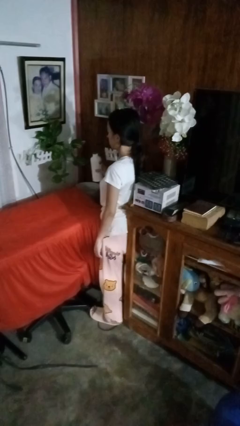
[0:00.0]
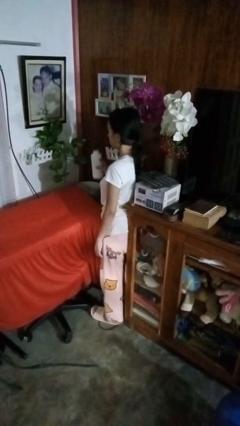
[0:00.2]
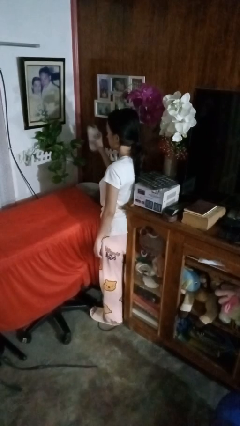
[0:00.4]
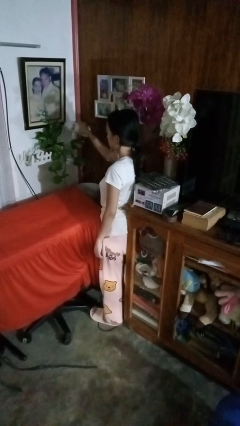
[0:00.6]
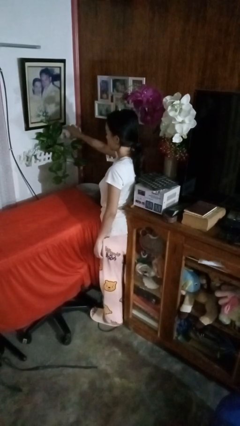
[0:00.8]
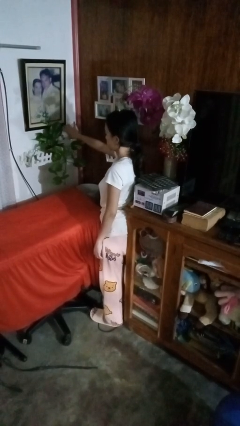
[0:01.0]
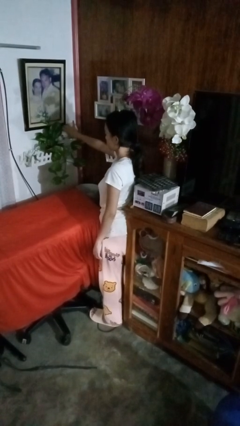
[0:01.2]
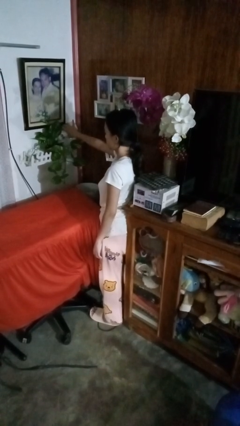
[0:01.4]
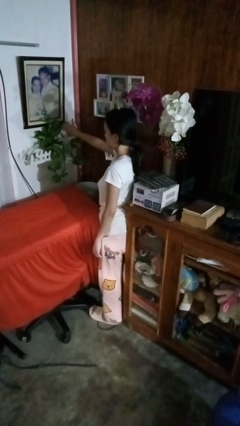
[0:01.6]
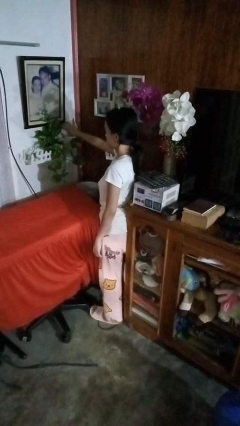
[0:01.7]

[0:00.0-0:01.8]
person waters houseplant

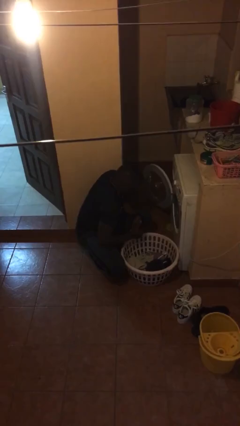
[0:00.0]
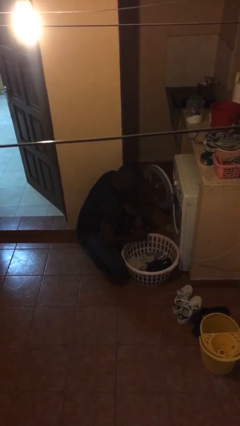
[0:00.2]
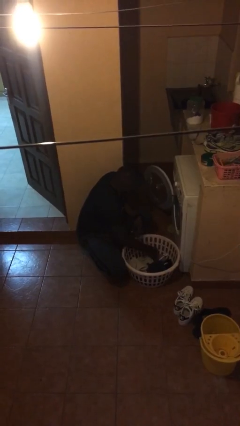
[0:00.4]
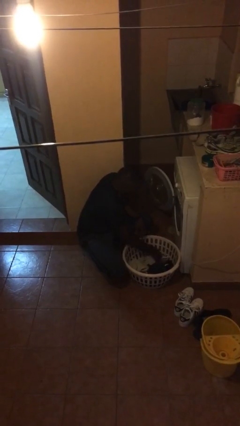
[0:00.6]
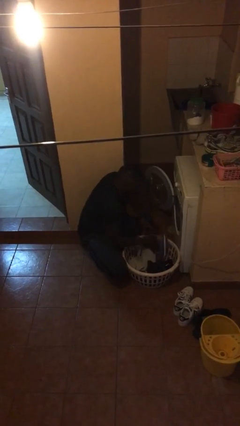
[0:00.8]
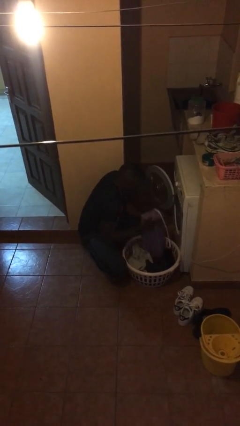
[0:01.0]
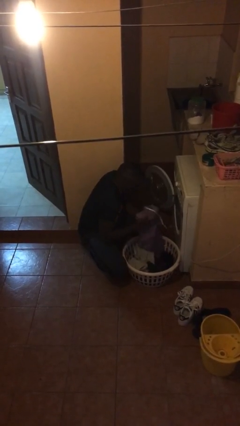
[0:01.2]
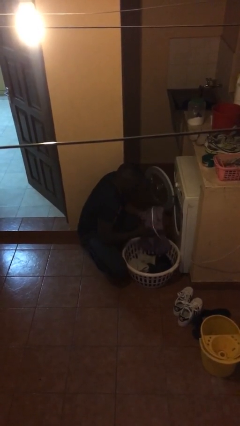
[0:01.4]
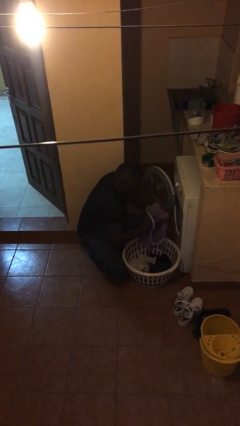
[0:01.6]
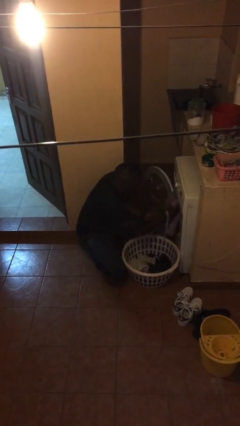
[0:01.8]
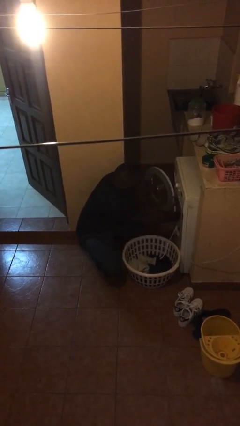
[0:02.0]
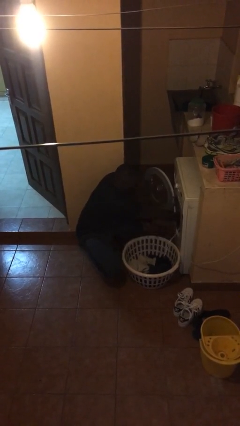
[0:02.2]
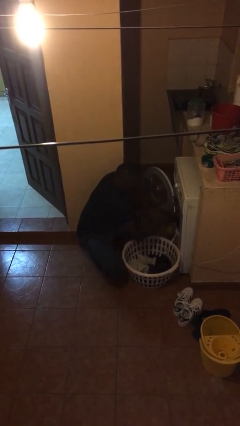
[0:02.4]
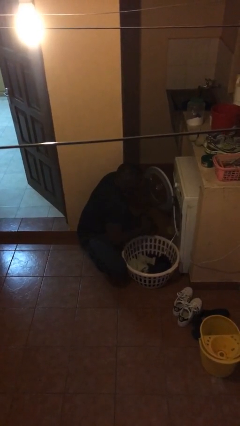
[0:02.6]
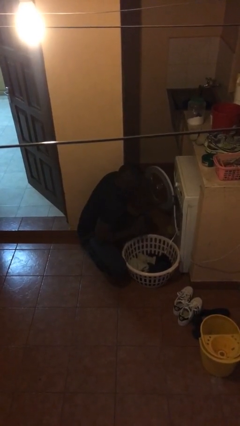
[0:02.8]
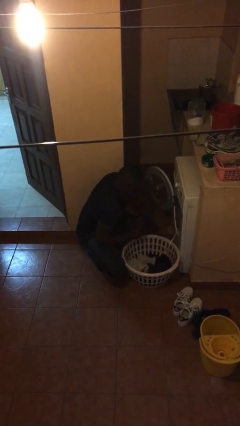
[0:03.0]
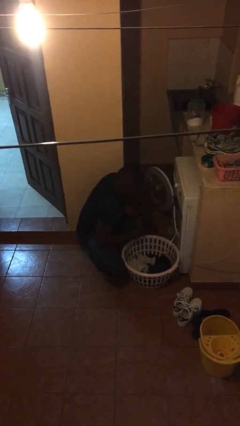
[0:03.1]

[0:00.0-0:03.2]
person loads clotheswasher

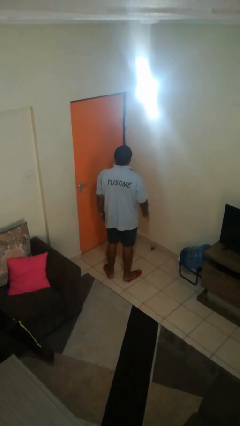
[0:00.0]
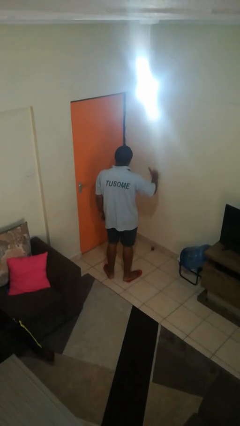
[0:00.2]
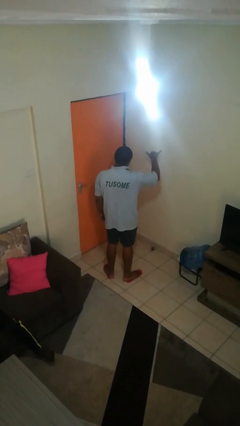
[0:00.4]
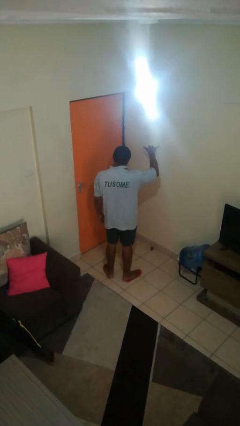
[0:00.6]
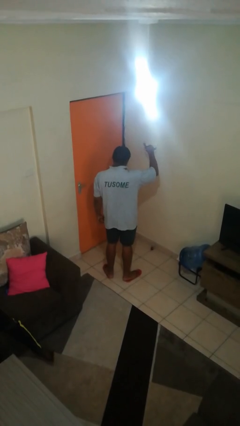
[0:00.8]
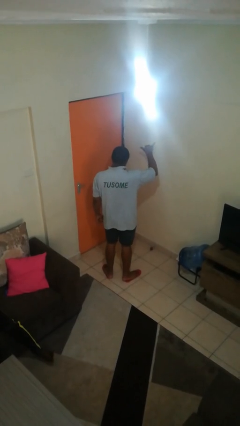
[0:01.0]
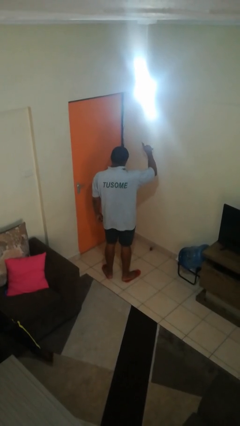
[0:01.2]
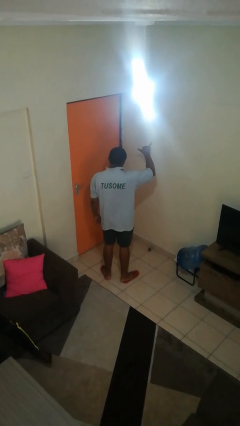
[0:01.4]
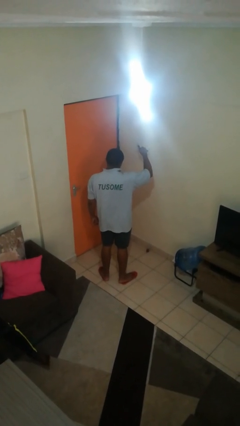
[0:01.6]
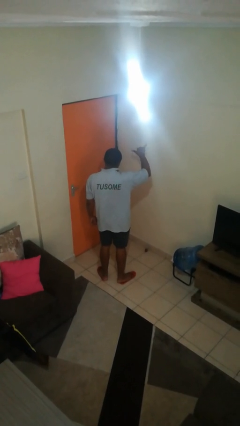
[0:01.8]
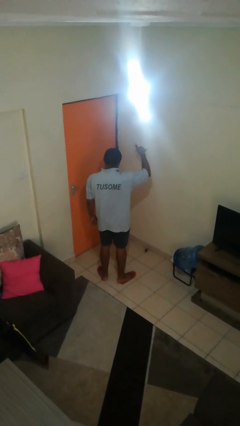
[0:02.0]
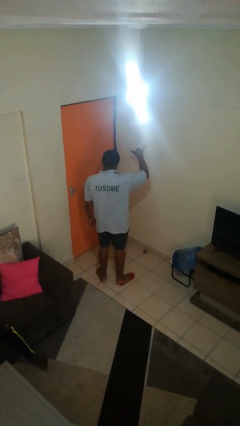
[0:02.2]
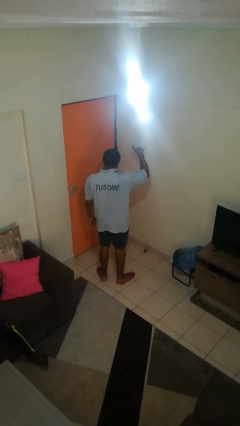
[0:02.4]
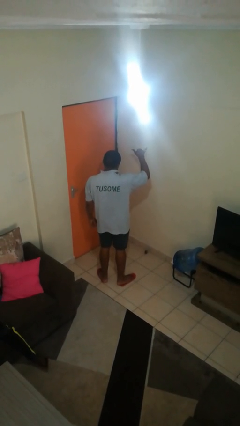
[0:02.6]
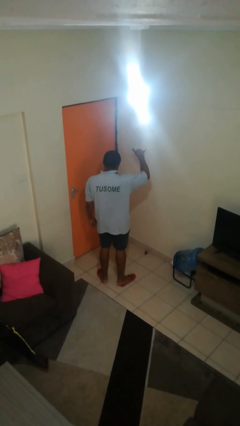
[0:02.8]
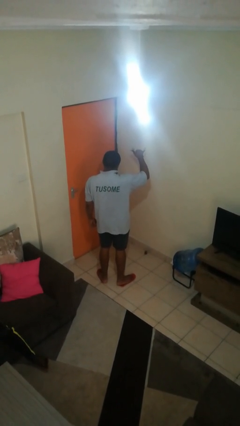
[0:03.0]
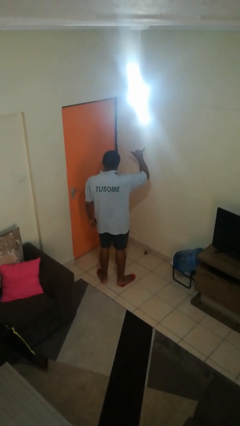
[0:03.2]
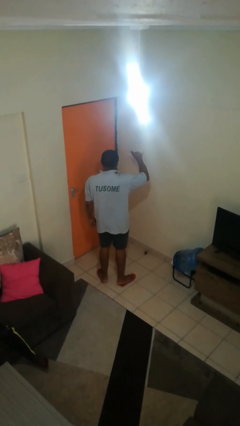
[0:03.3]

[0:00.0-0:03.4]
person gestures hang loose

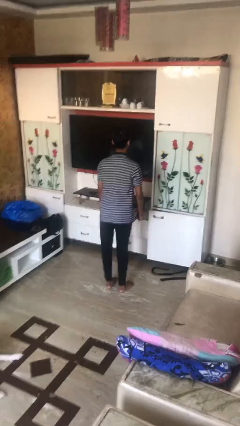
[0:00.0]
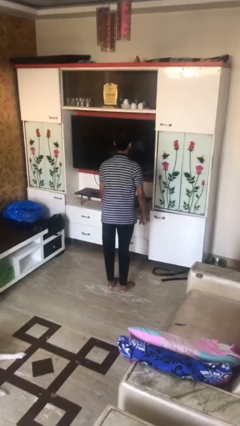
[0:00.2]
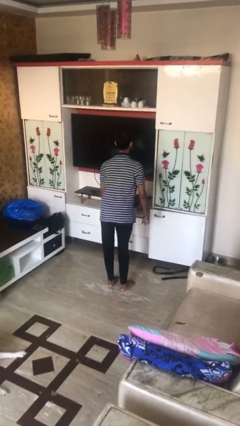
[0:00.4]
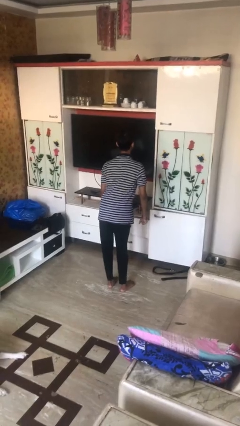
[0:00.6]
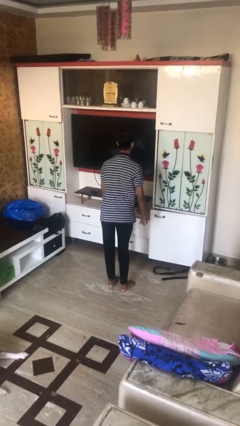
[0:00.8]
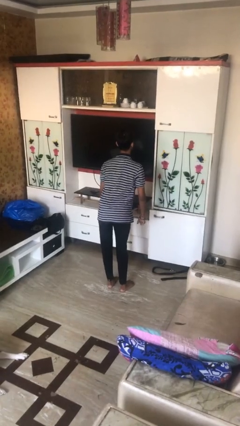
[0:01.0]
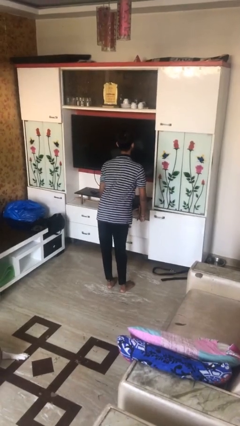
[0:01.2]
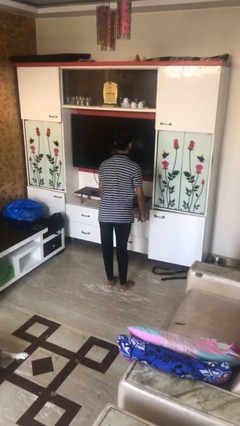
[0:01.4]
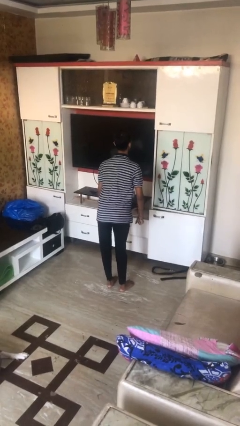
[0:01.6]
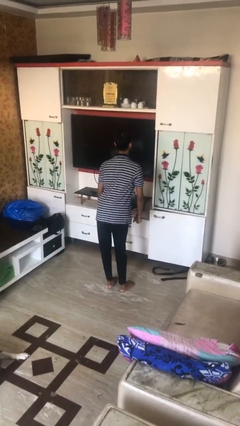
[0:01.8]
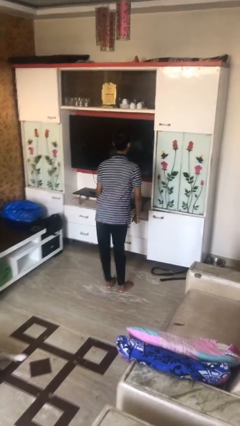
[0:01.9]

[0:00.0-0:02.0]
person wiggles hips

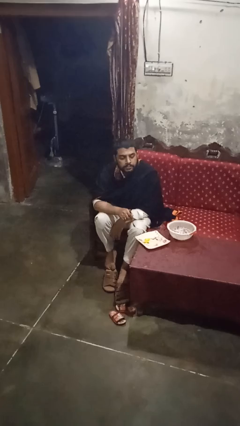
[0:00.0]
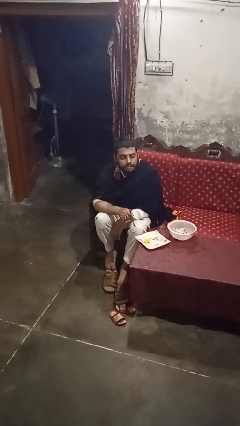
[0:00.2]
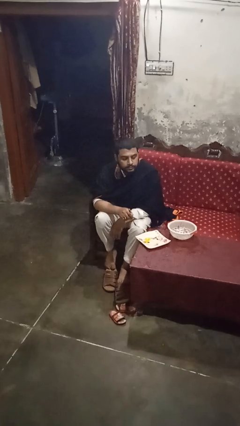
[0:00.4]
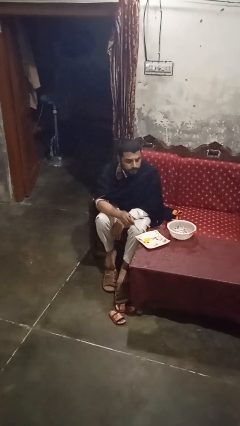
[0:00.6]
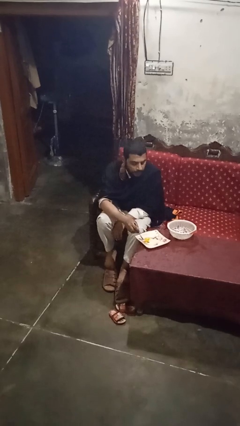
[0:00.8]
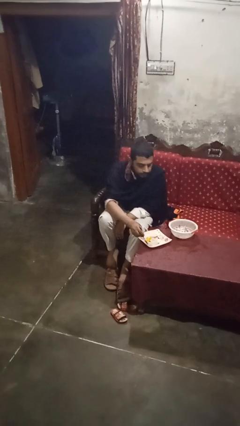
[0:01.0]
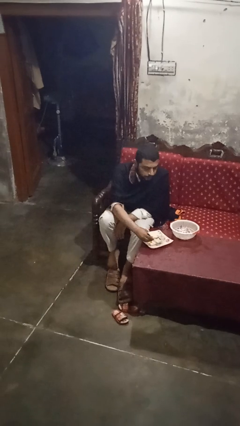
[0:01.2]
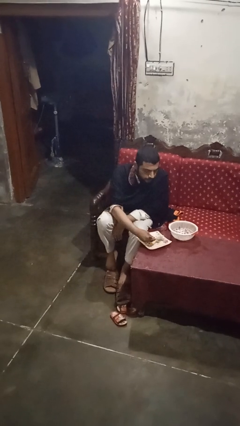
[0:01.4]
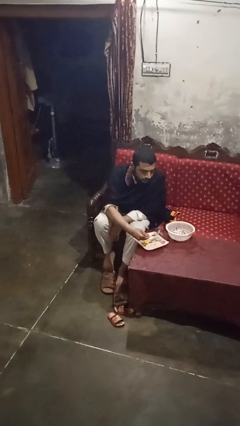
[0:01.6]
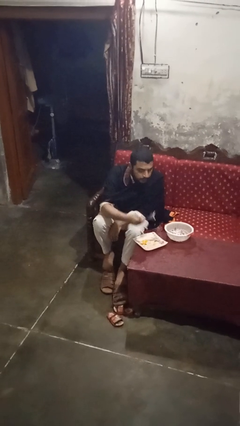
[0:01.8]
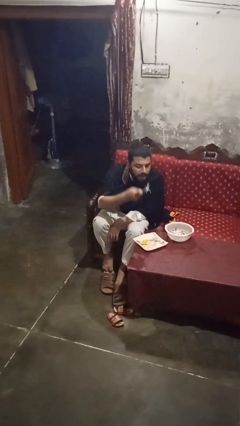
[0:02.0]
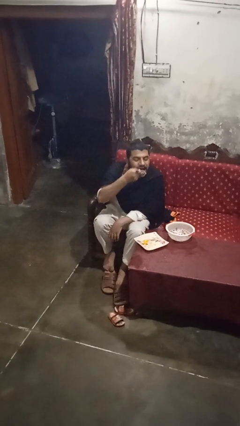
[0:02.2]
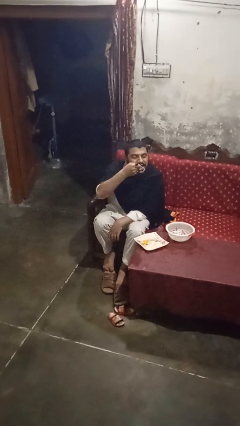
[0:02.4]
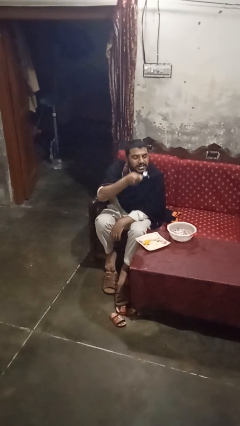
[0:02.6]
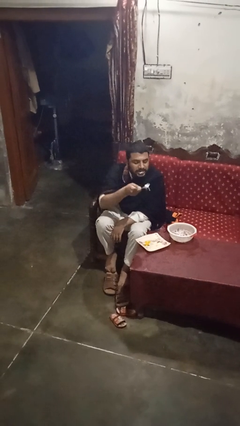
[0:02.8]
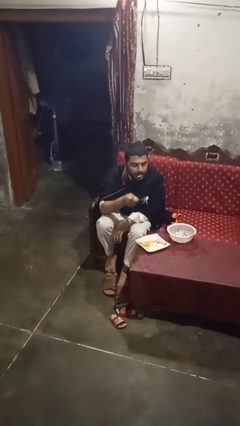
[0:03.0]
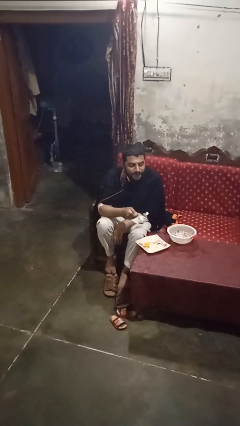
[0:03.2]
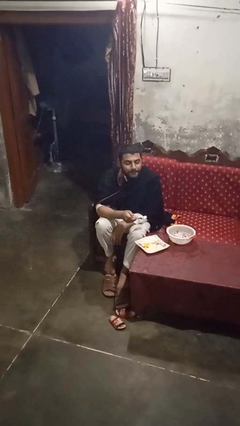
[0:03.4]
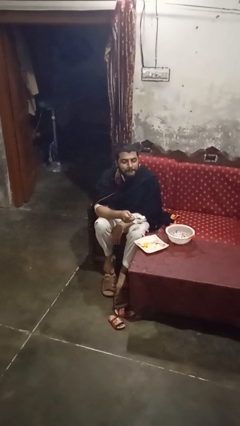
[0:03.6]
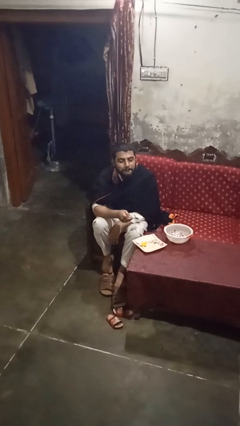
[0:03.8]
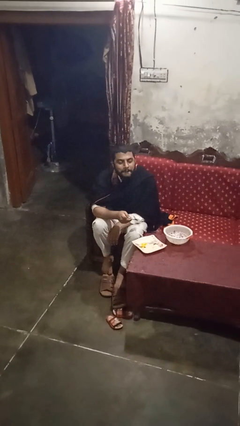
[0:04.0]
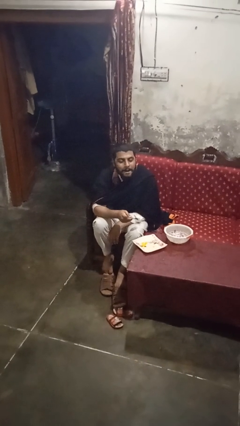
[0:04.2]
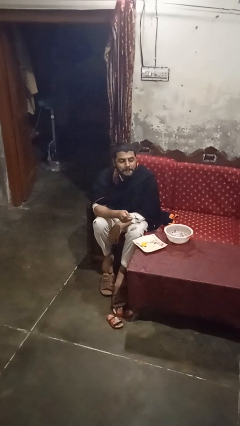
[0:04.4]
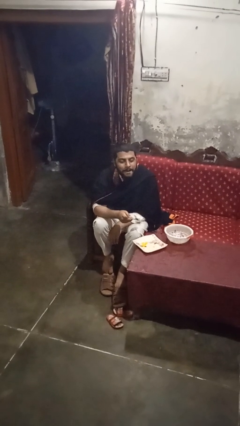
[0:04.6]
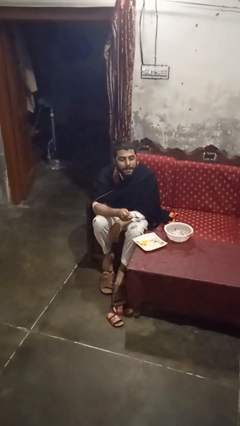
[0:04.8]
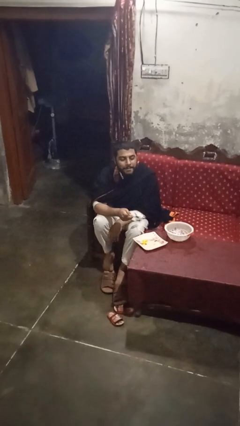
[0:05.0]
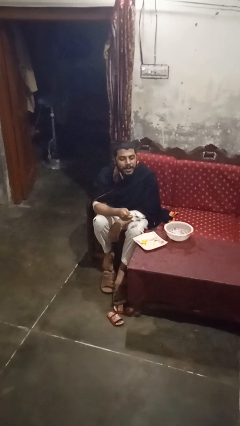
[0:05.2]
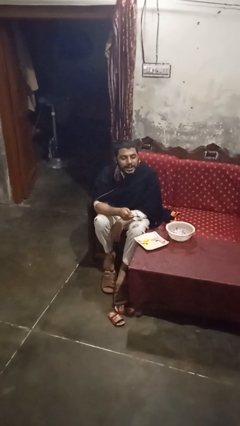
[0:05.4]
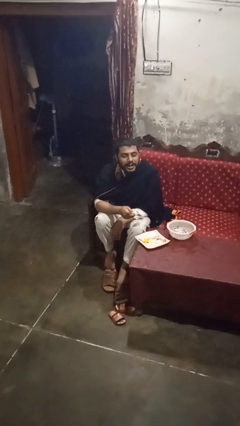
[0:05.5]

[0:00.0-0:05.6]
person eats with utensil

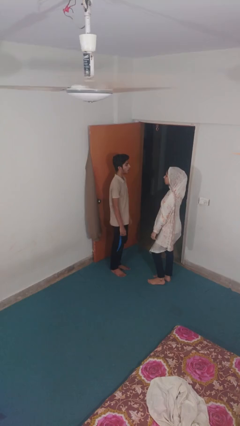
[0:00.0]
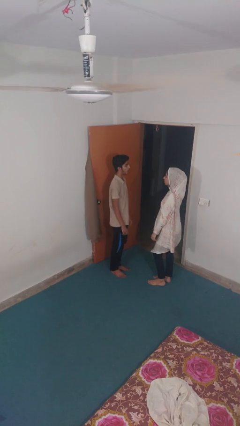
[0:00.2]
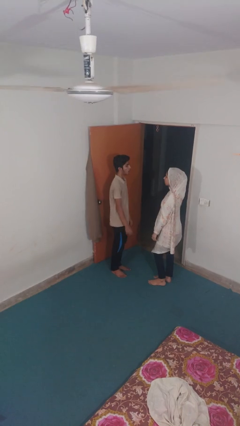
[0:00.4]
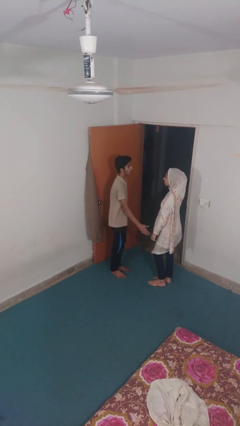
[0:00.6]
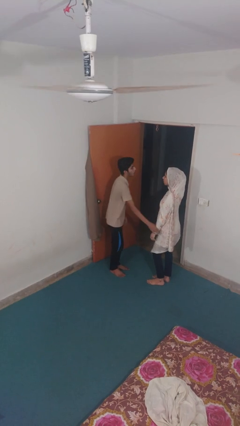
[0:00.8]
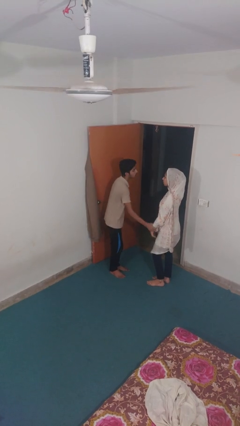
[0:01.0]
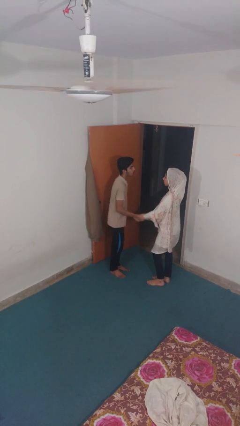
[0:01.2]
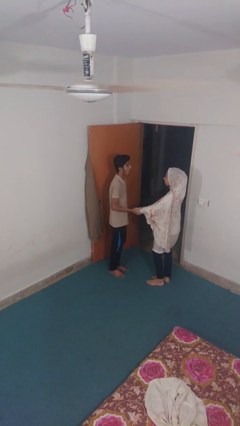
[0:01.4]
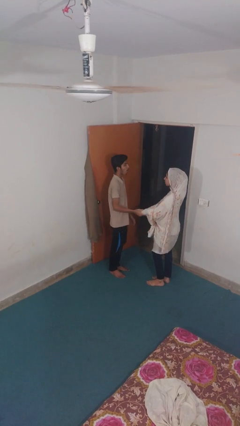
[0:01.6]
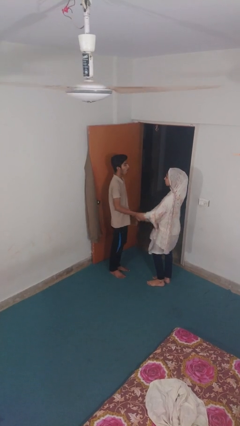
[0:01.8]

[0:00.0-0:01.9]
person grabs person by forearm
